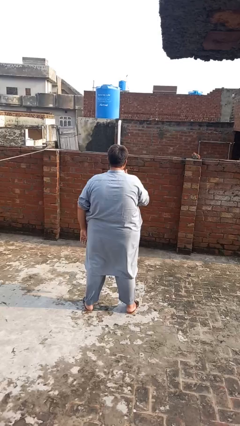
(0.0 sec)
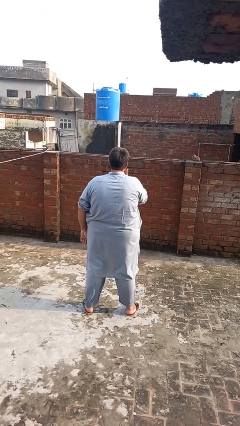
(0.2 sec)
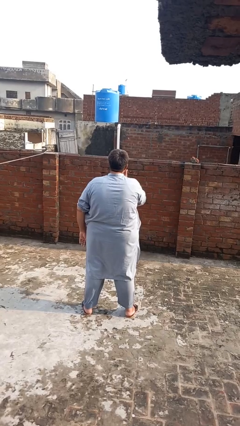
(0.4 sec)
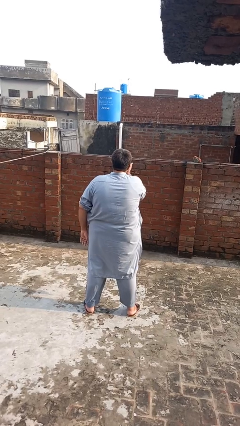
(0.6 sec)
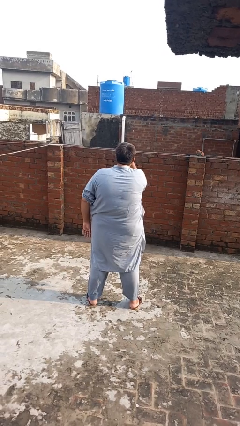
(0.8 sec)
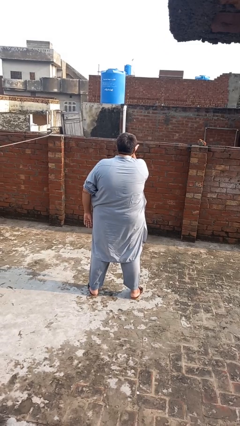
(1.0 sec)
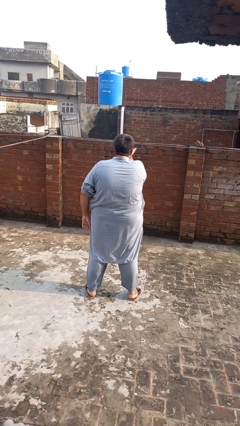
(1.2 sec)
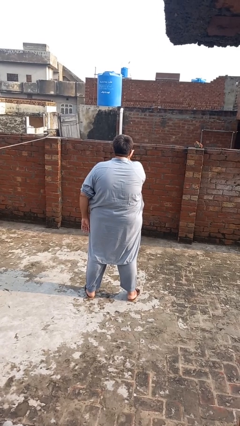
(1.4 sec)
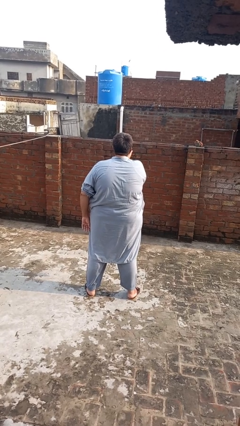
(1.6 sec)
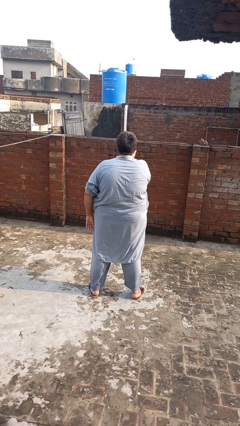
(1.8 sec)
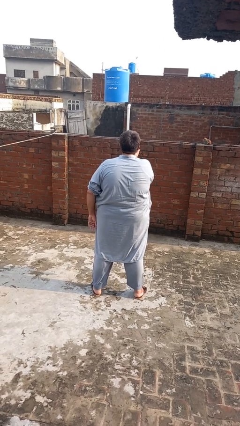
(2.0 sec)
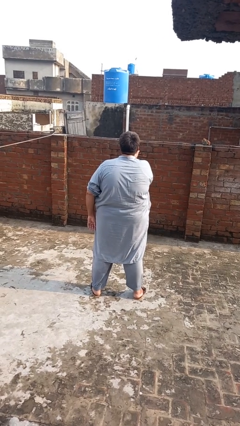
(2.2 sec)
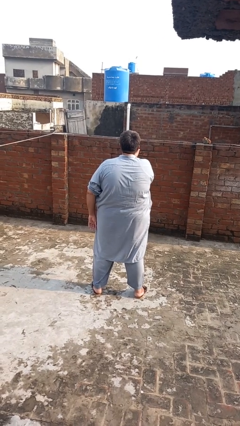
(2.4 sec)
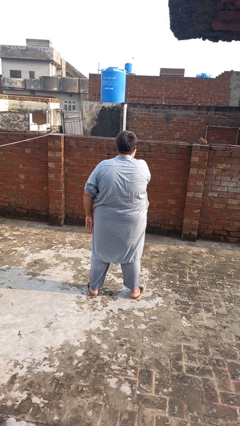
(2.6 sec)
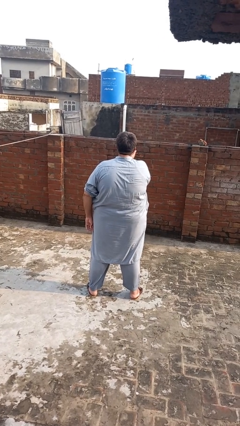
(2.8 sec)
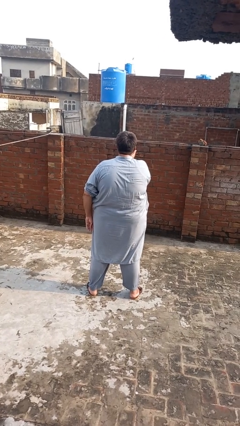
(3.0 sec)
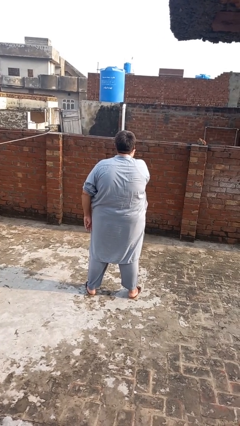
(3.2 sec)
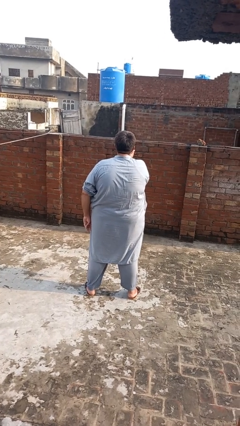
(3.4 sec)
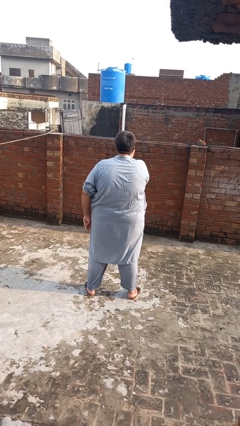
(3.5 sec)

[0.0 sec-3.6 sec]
person gestures blow kiss

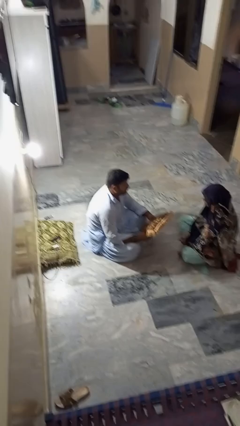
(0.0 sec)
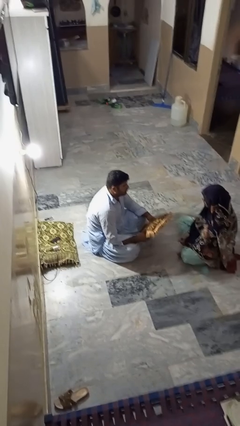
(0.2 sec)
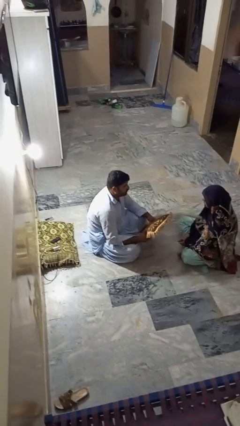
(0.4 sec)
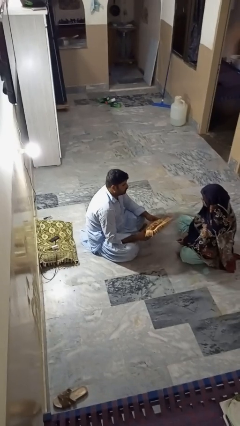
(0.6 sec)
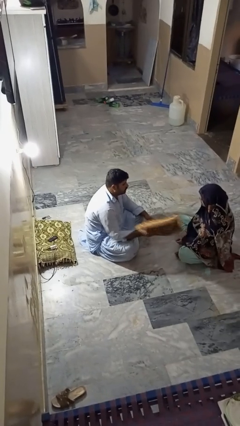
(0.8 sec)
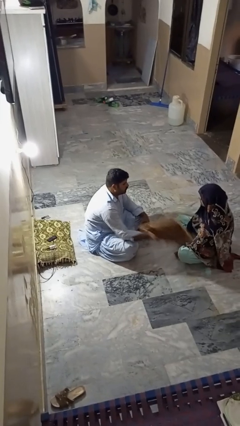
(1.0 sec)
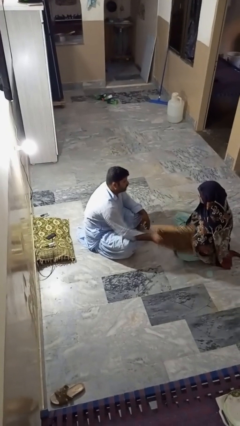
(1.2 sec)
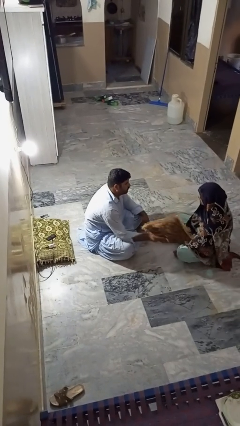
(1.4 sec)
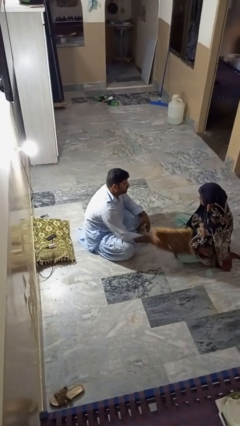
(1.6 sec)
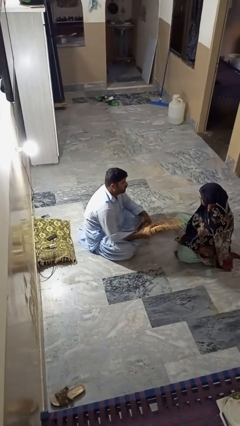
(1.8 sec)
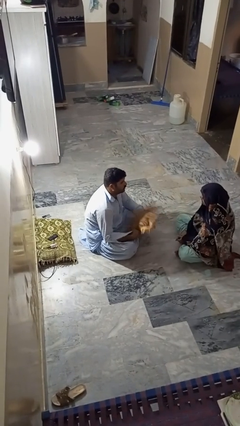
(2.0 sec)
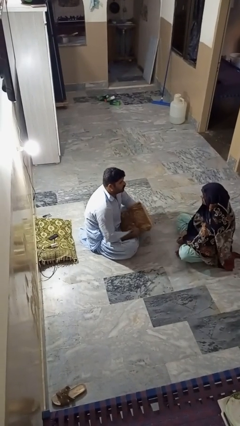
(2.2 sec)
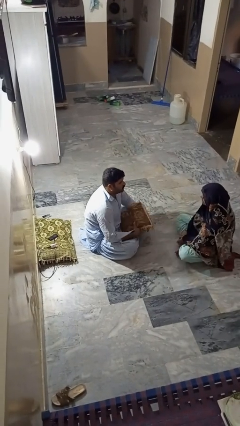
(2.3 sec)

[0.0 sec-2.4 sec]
person hits person with pillow

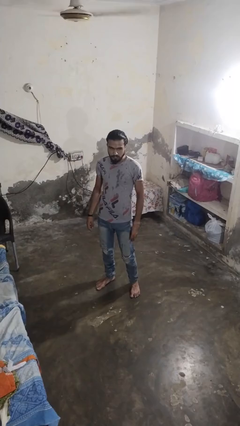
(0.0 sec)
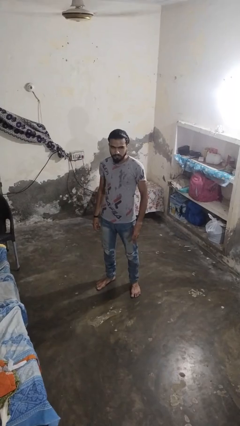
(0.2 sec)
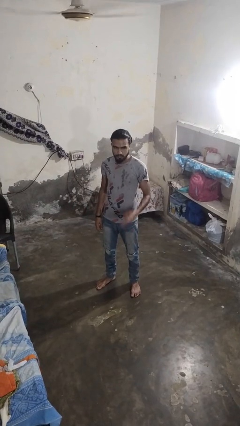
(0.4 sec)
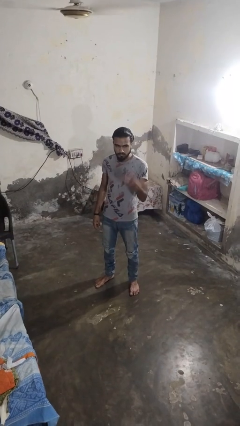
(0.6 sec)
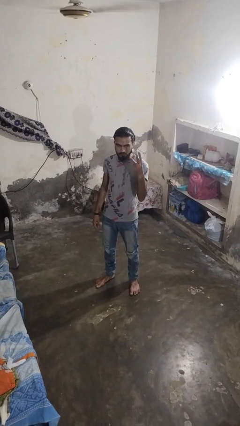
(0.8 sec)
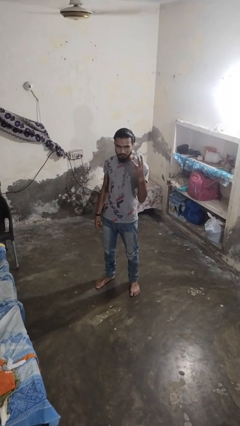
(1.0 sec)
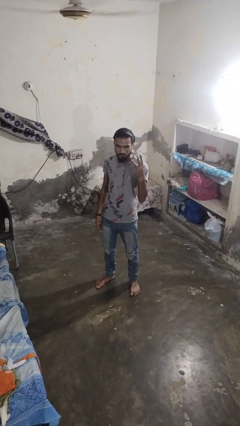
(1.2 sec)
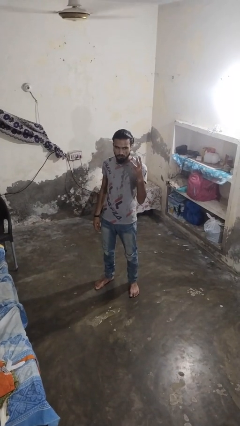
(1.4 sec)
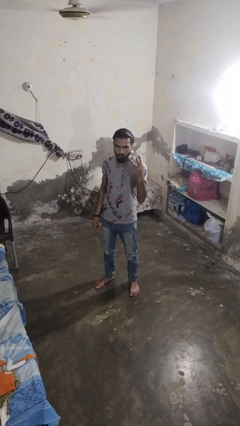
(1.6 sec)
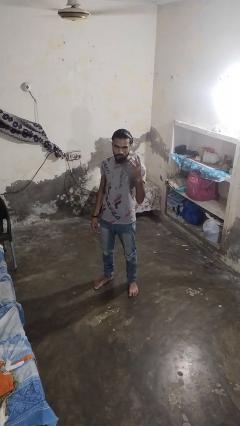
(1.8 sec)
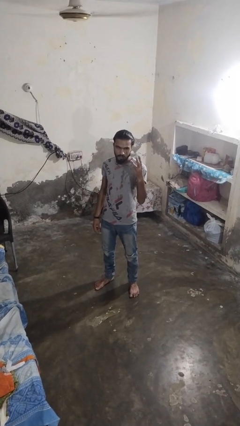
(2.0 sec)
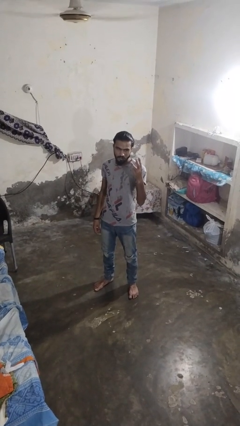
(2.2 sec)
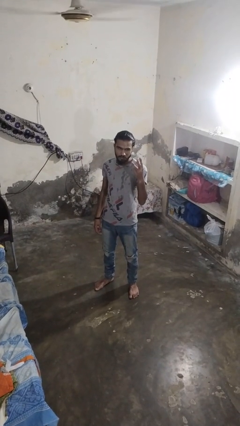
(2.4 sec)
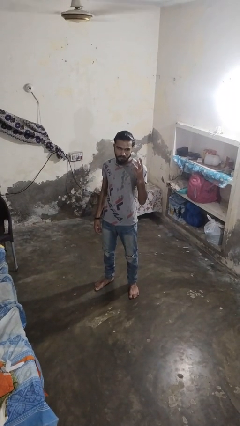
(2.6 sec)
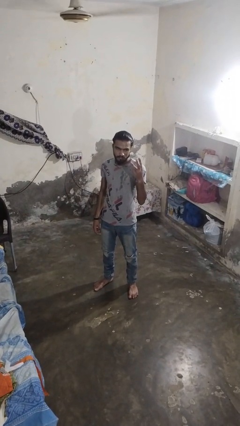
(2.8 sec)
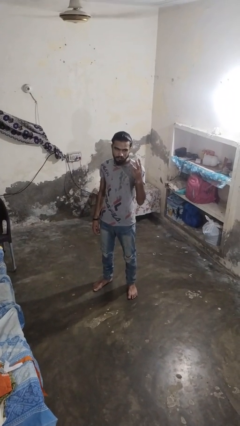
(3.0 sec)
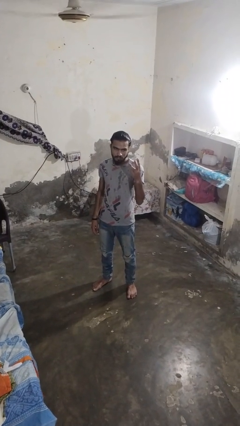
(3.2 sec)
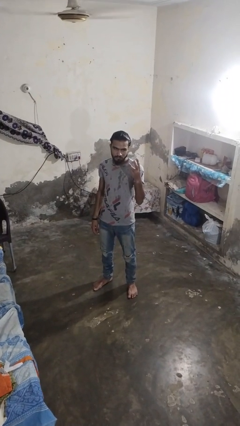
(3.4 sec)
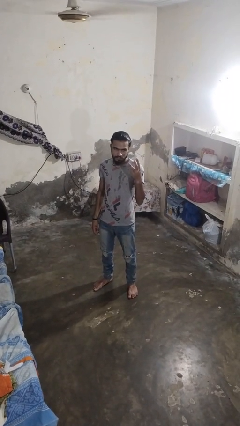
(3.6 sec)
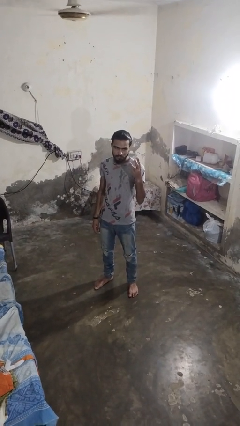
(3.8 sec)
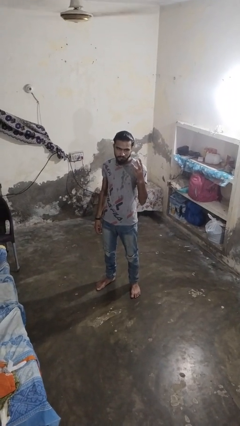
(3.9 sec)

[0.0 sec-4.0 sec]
person gestures number three

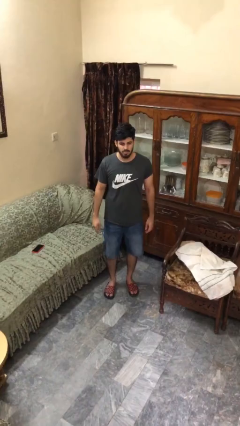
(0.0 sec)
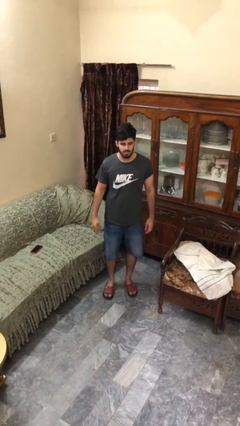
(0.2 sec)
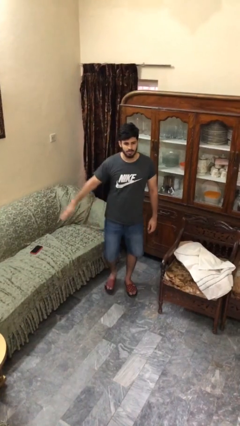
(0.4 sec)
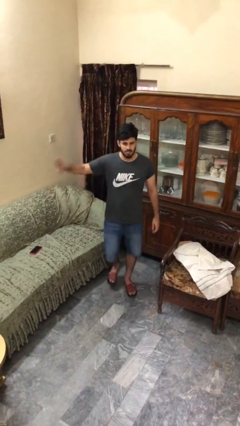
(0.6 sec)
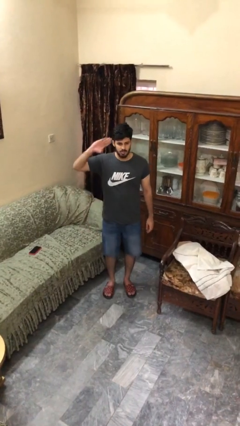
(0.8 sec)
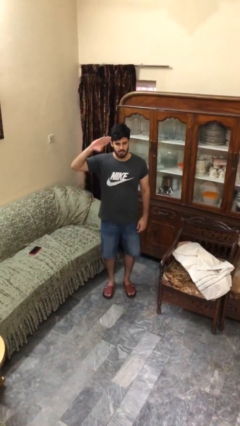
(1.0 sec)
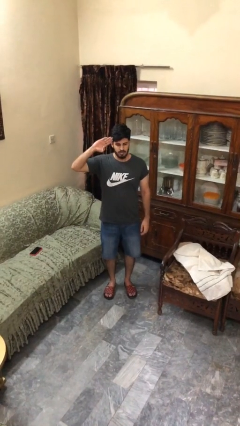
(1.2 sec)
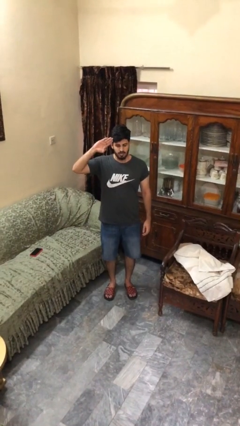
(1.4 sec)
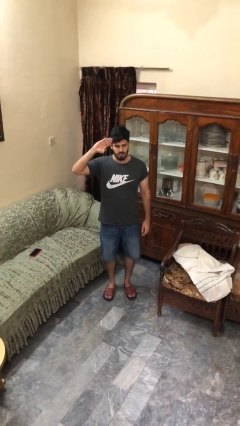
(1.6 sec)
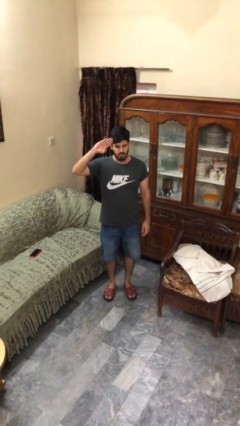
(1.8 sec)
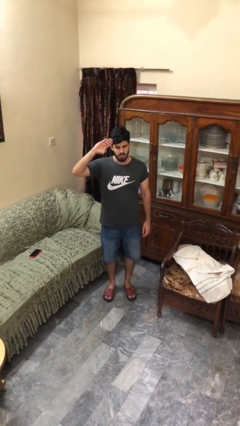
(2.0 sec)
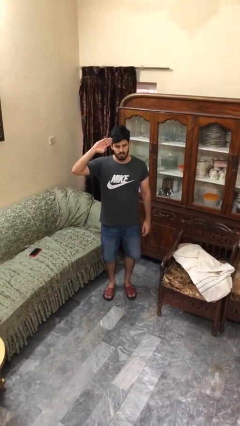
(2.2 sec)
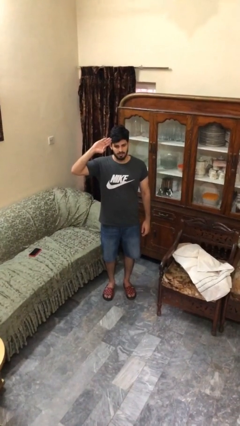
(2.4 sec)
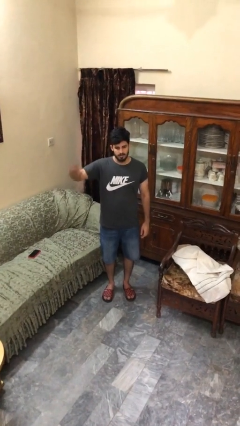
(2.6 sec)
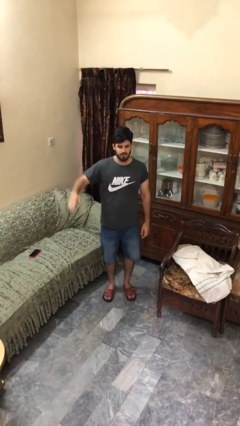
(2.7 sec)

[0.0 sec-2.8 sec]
person salutes

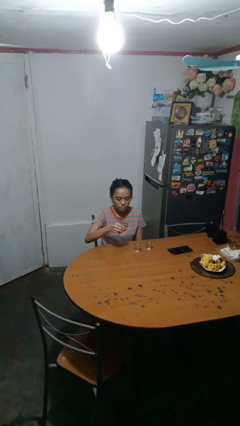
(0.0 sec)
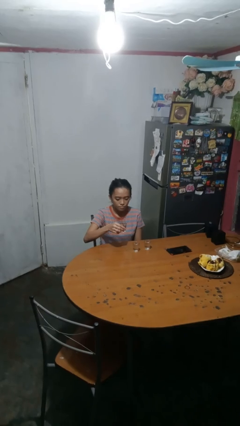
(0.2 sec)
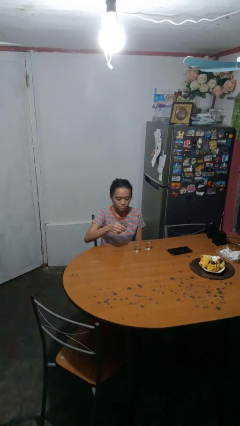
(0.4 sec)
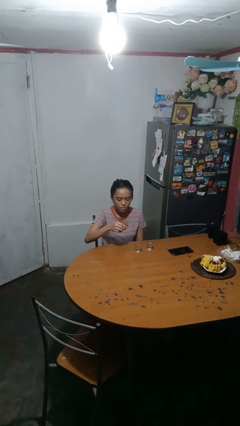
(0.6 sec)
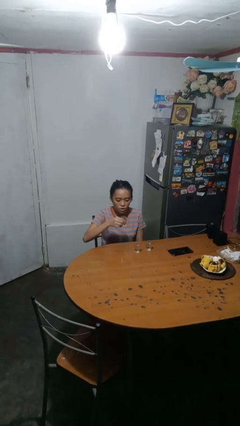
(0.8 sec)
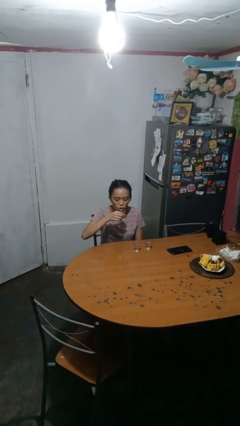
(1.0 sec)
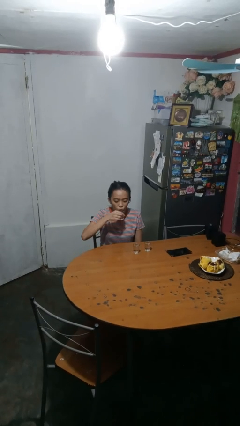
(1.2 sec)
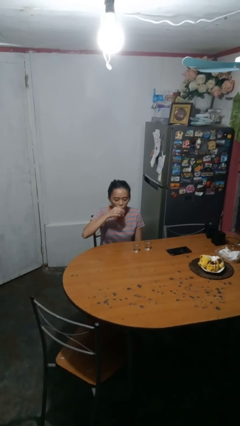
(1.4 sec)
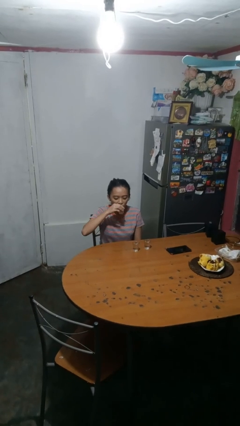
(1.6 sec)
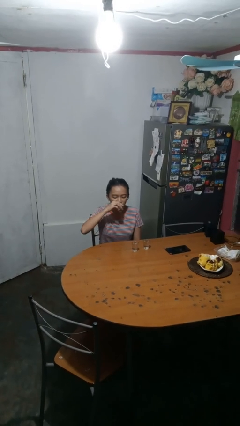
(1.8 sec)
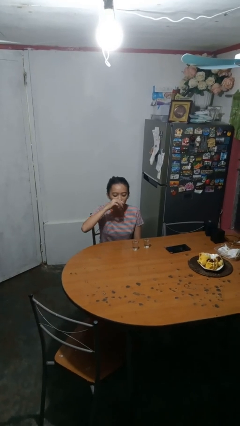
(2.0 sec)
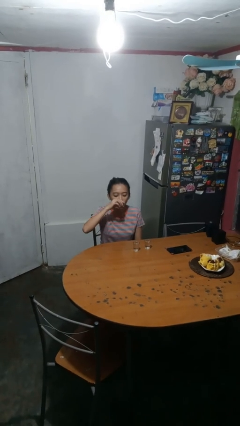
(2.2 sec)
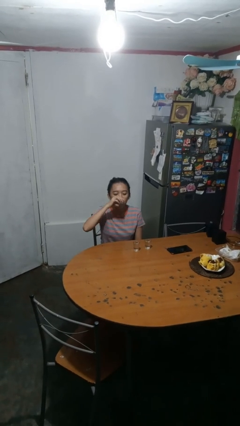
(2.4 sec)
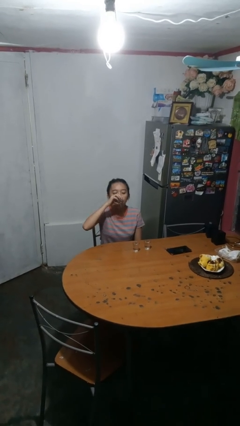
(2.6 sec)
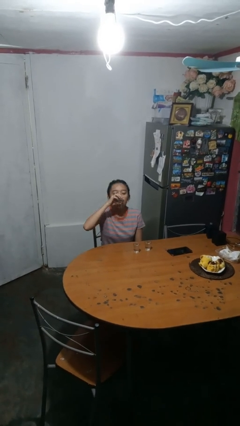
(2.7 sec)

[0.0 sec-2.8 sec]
person drinks from shotglass

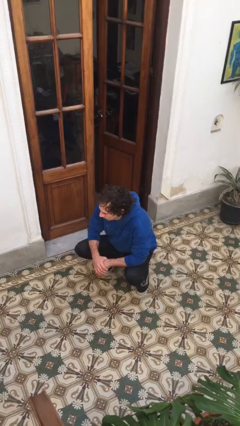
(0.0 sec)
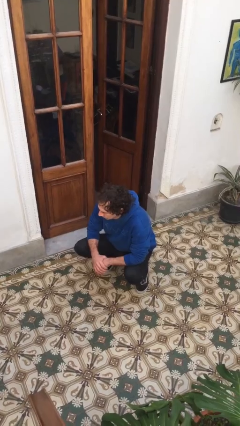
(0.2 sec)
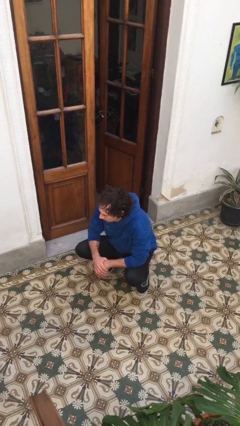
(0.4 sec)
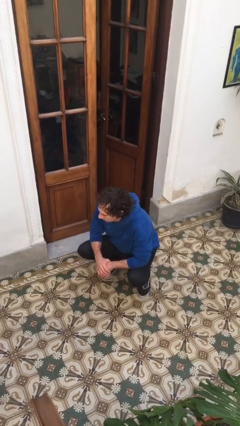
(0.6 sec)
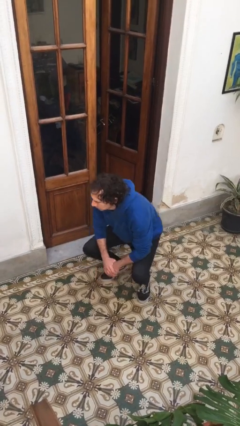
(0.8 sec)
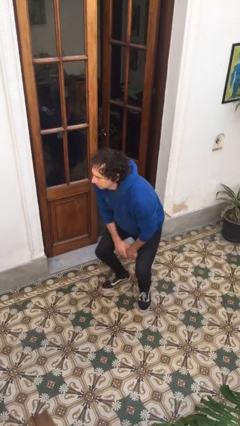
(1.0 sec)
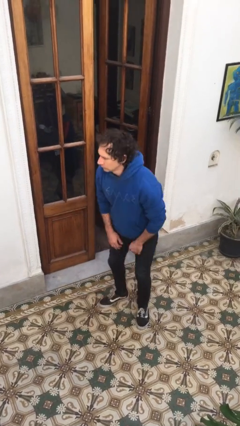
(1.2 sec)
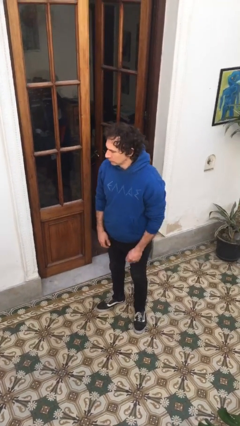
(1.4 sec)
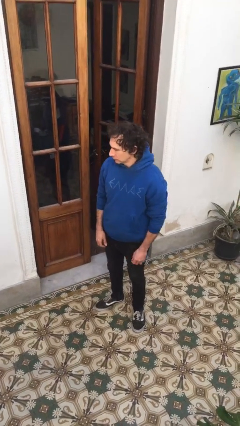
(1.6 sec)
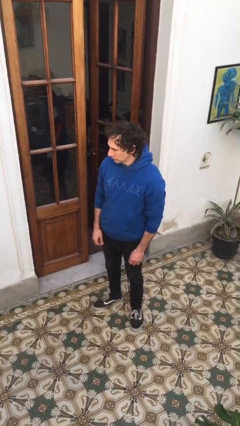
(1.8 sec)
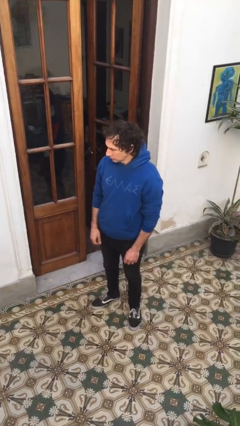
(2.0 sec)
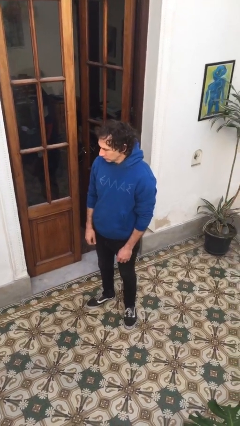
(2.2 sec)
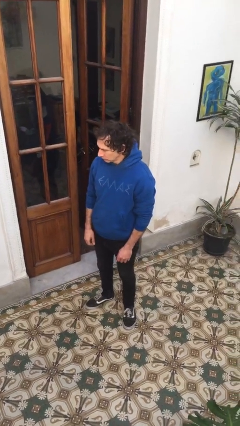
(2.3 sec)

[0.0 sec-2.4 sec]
person stands up
